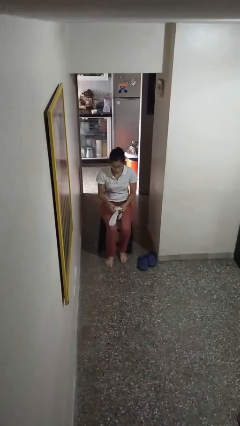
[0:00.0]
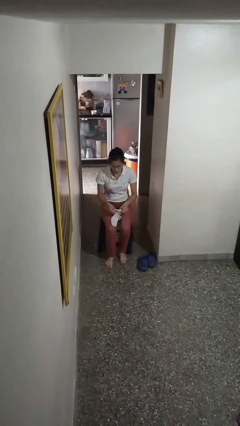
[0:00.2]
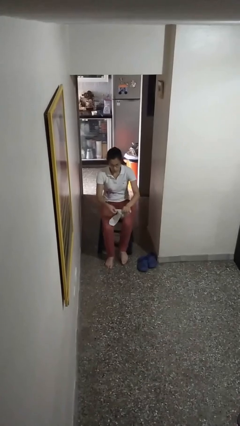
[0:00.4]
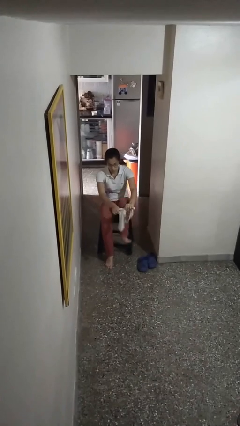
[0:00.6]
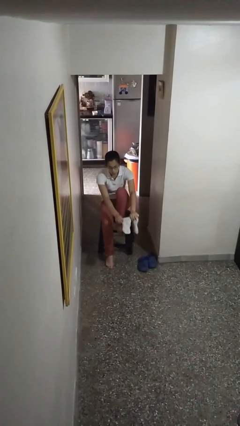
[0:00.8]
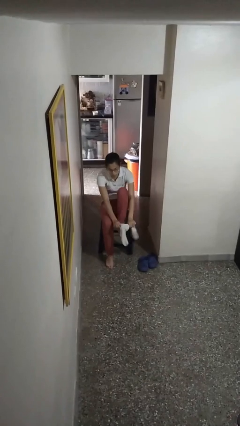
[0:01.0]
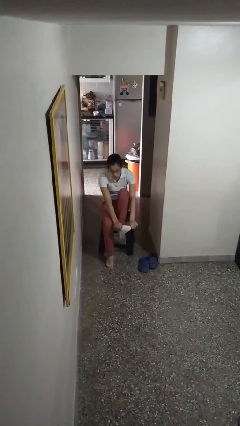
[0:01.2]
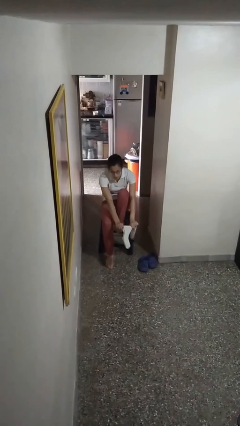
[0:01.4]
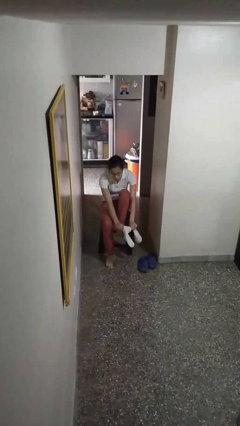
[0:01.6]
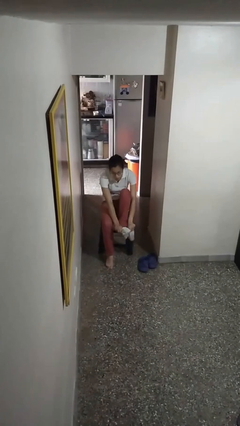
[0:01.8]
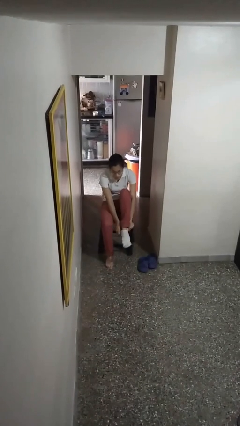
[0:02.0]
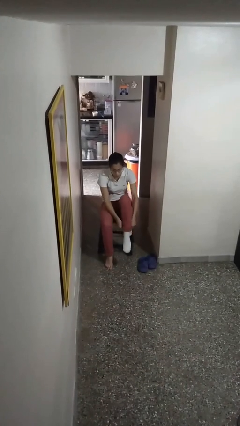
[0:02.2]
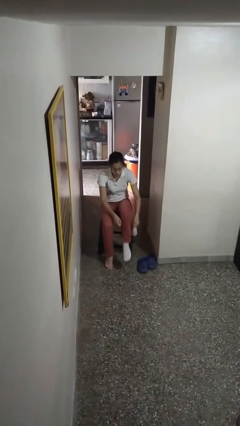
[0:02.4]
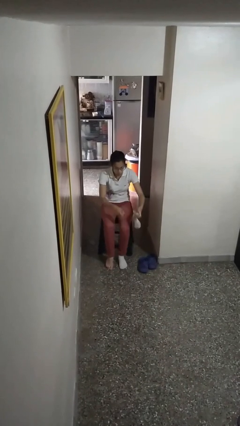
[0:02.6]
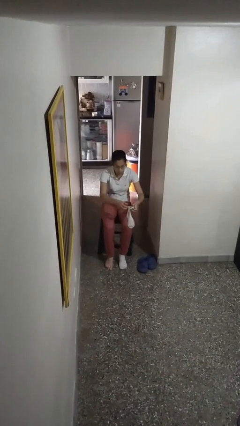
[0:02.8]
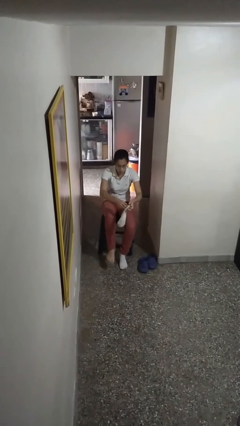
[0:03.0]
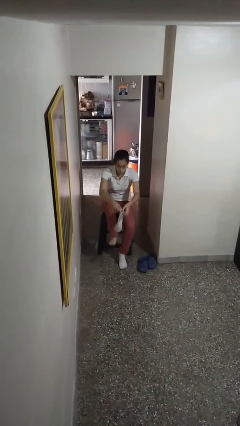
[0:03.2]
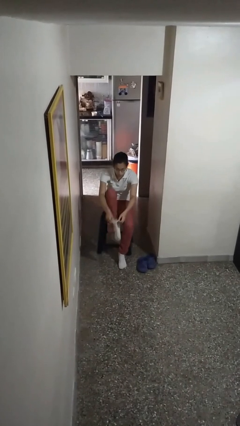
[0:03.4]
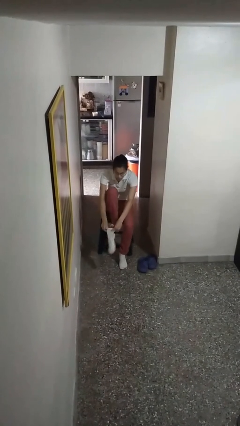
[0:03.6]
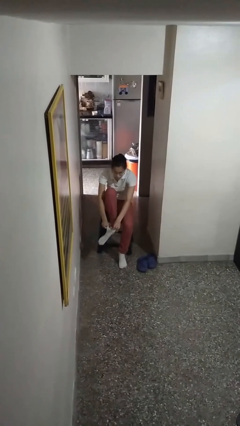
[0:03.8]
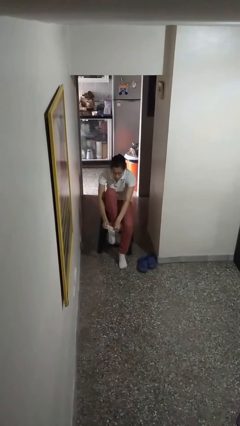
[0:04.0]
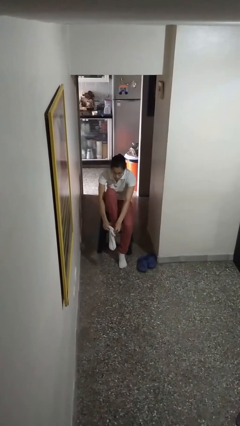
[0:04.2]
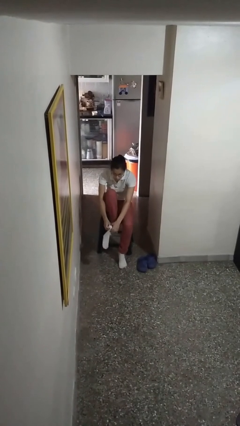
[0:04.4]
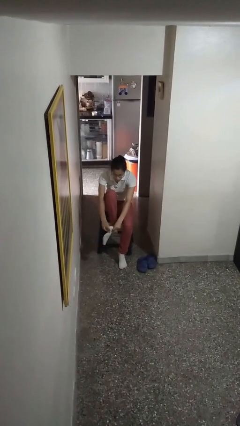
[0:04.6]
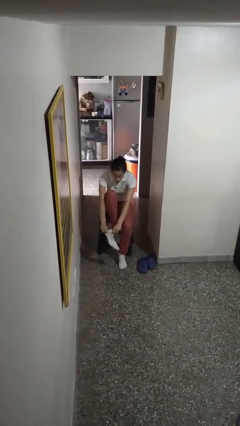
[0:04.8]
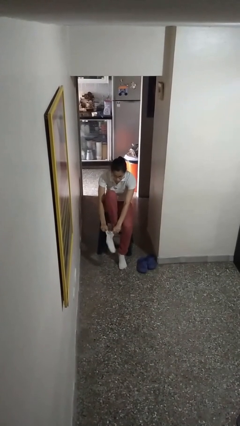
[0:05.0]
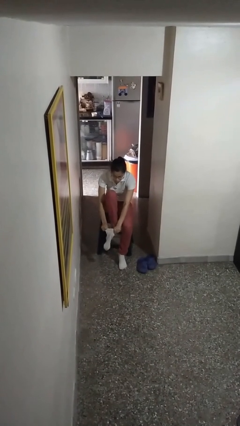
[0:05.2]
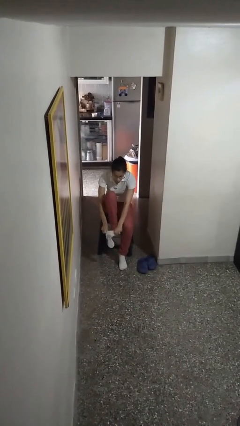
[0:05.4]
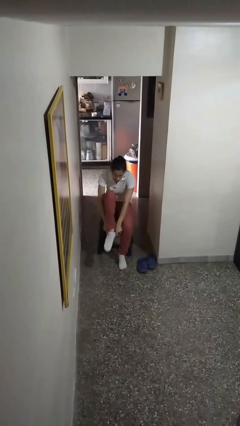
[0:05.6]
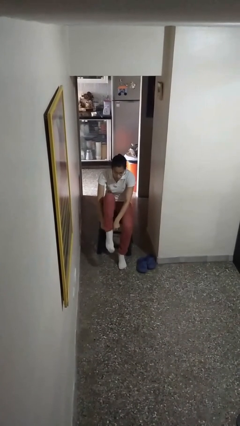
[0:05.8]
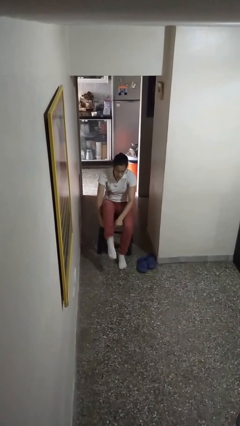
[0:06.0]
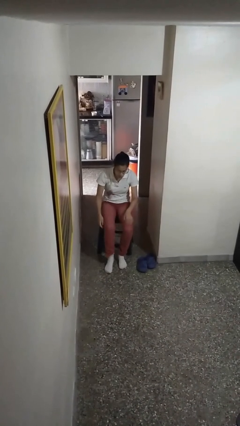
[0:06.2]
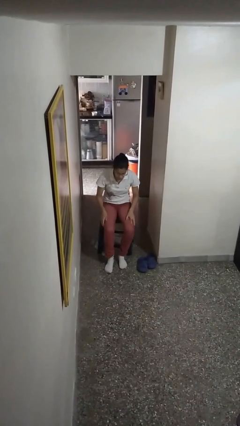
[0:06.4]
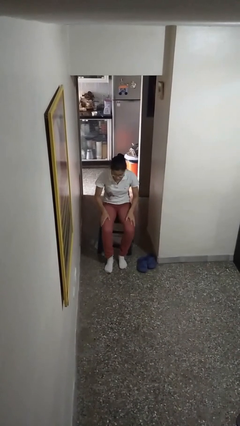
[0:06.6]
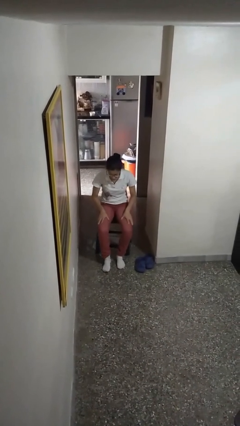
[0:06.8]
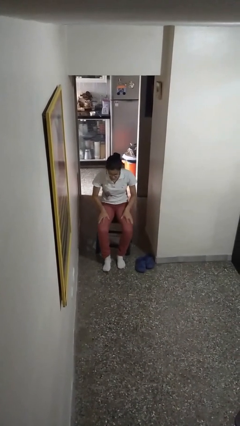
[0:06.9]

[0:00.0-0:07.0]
person puts on socks

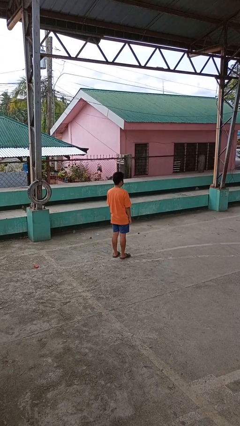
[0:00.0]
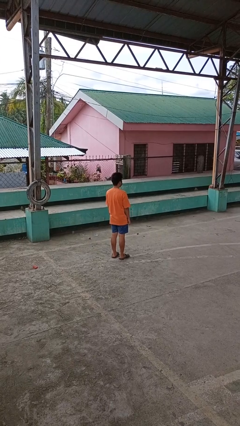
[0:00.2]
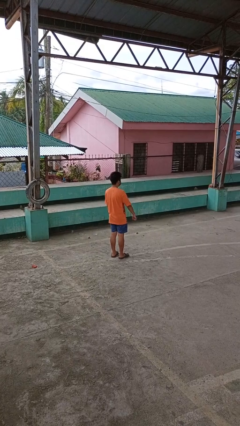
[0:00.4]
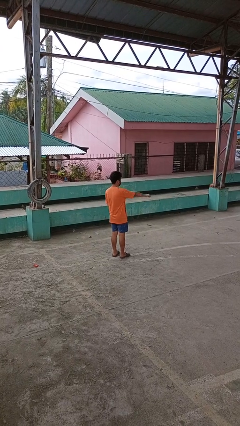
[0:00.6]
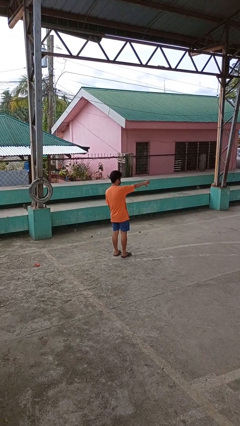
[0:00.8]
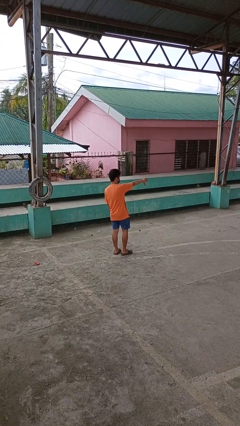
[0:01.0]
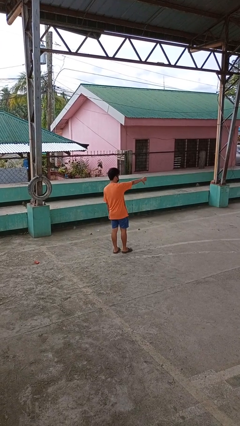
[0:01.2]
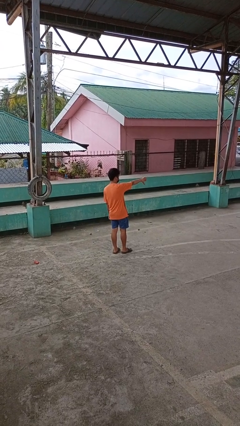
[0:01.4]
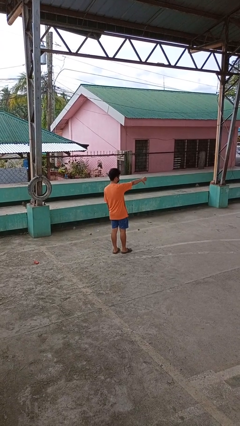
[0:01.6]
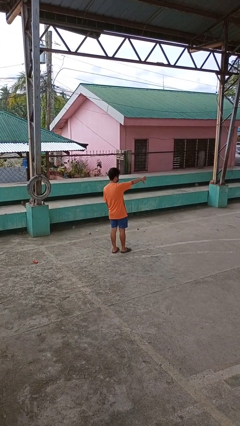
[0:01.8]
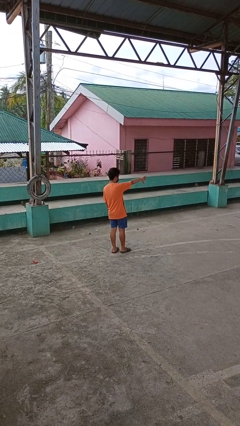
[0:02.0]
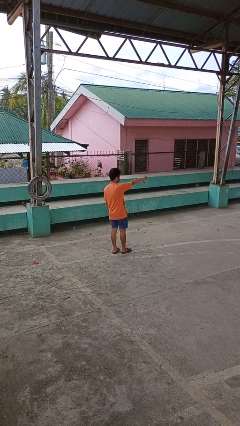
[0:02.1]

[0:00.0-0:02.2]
person gestures thumbs down

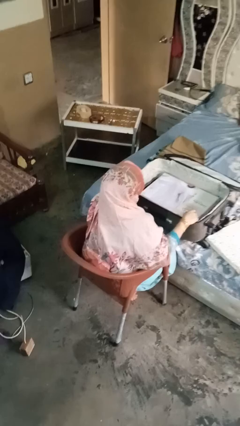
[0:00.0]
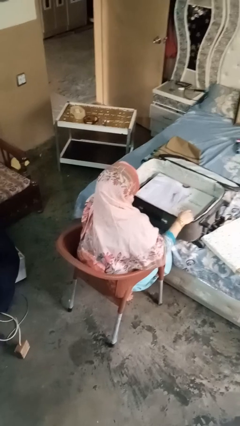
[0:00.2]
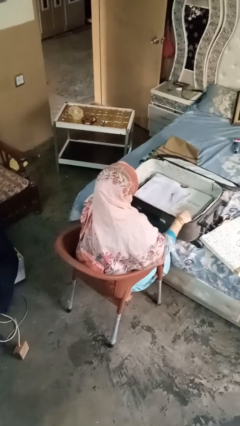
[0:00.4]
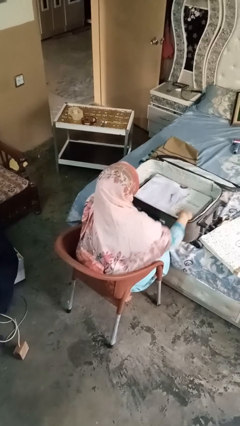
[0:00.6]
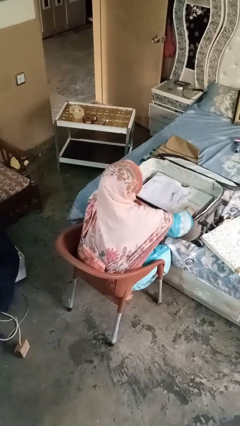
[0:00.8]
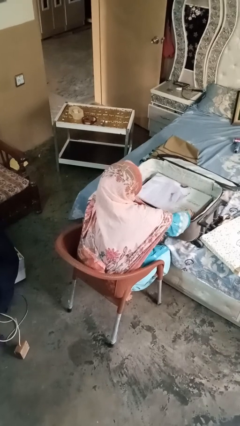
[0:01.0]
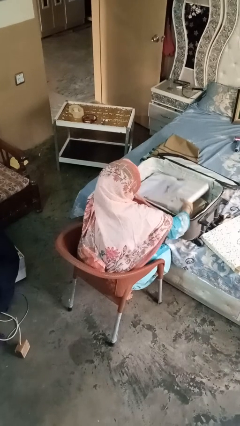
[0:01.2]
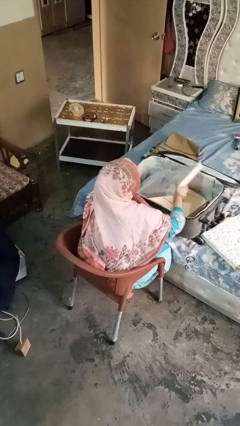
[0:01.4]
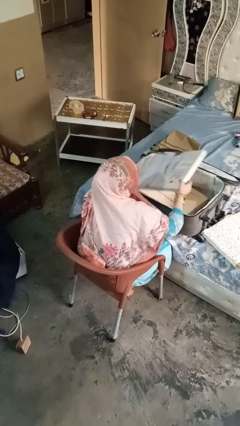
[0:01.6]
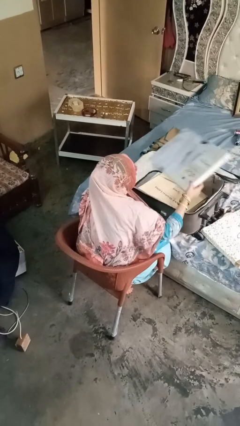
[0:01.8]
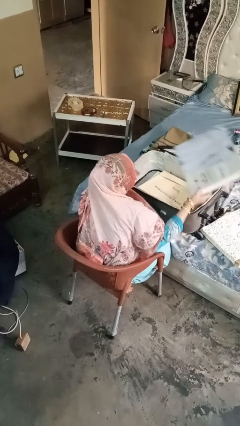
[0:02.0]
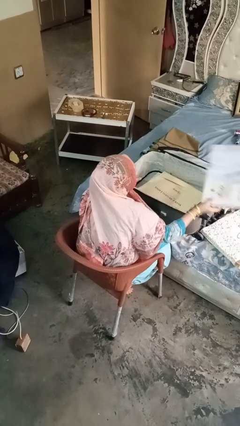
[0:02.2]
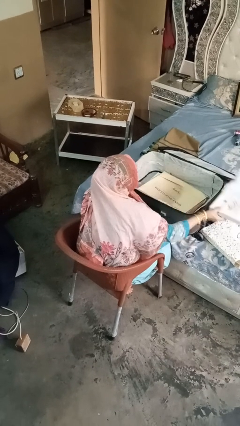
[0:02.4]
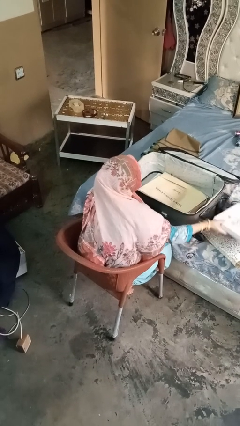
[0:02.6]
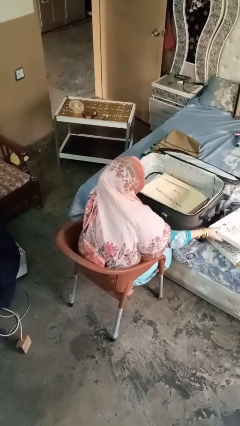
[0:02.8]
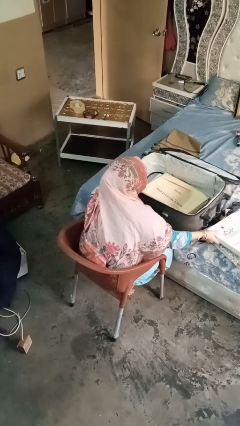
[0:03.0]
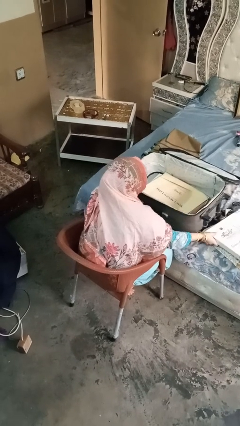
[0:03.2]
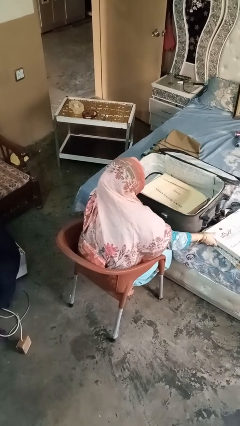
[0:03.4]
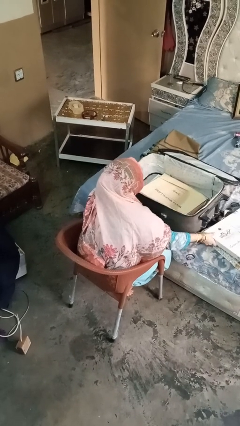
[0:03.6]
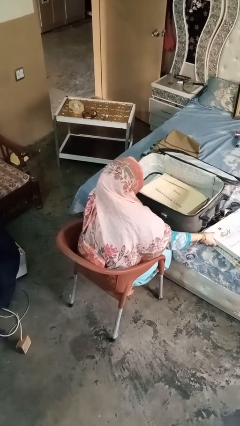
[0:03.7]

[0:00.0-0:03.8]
person unloads clothes from suitcase

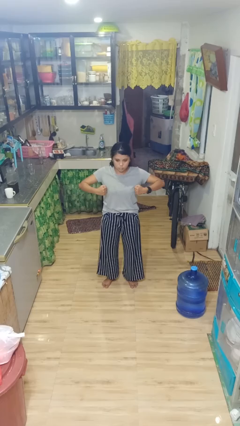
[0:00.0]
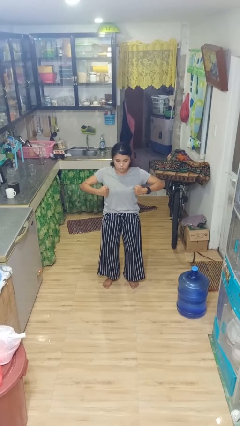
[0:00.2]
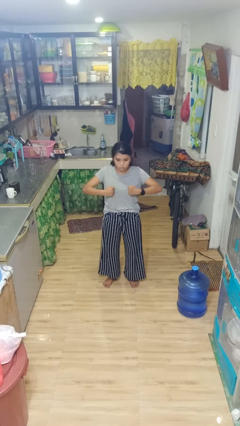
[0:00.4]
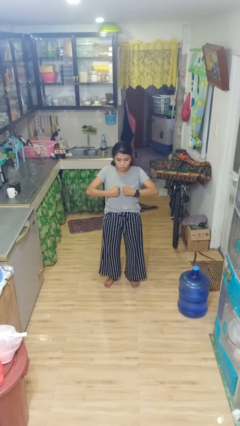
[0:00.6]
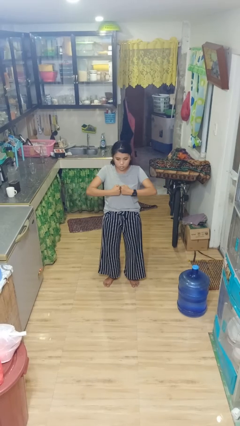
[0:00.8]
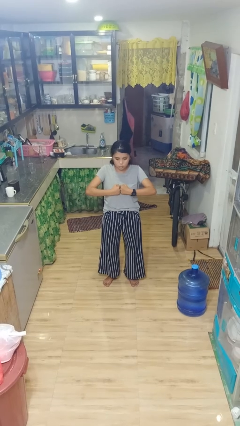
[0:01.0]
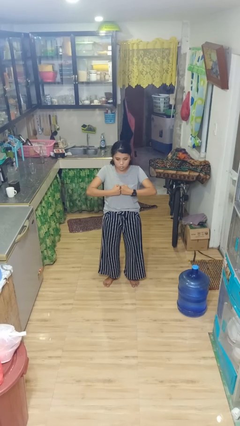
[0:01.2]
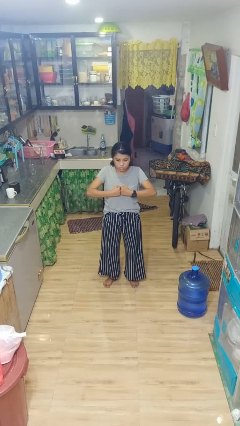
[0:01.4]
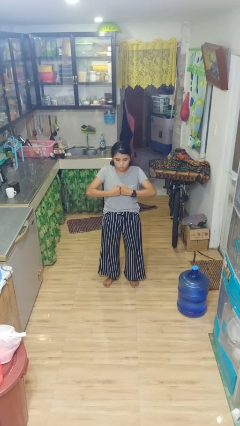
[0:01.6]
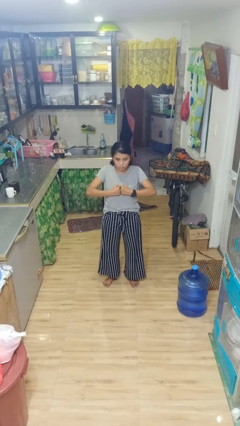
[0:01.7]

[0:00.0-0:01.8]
person gestures zoom out

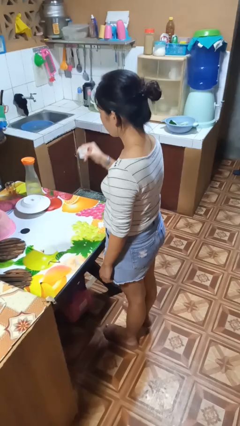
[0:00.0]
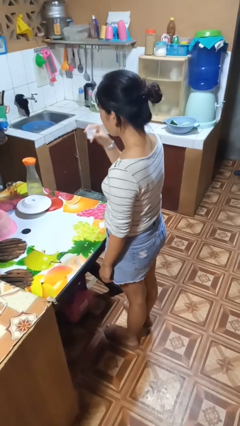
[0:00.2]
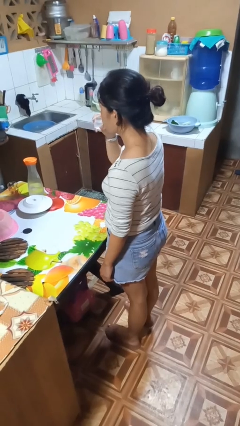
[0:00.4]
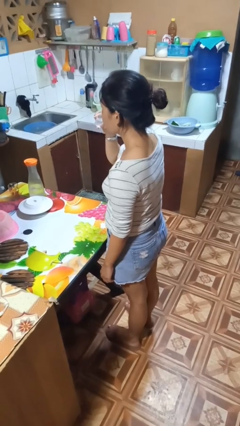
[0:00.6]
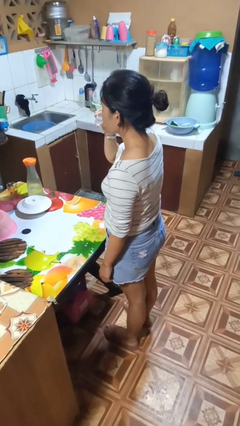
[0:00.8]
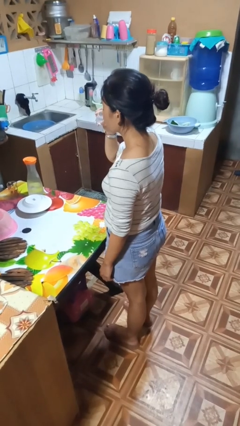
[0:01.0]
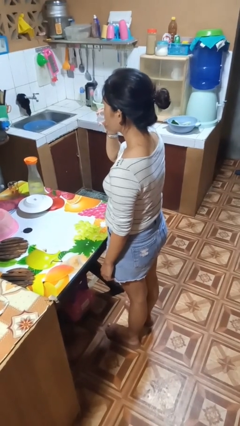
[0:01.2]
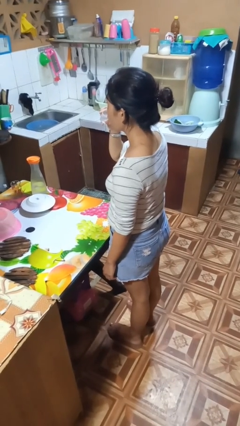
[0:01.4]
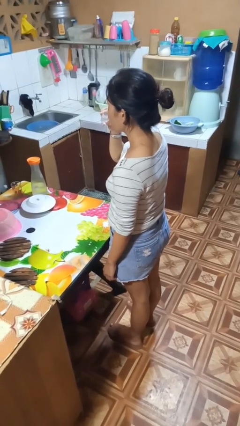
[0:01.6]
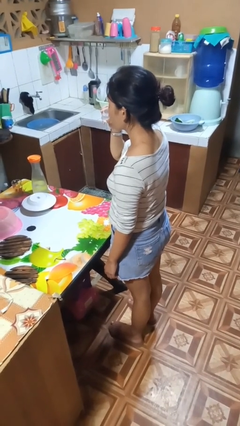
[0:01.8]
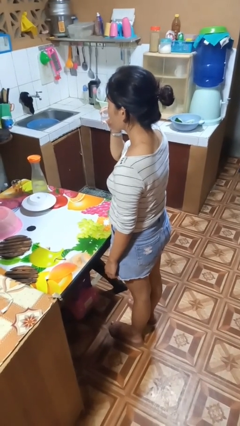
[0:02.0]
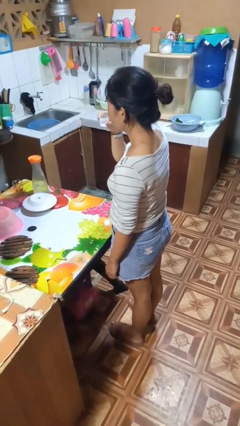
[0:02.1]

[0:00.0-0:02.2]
person drinks from shotglass

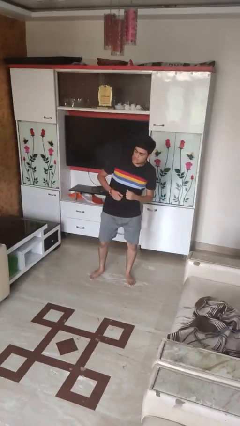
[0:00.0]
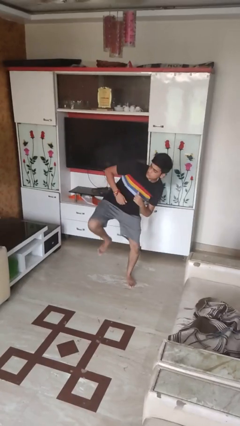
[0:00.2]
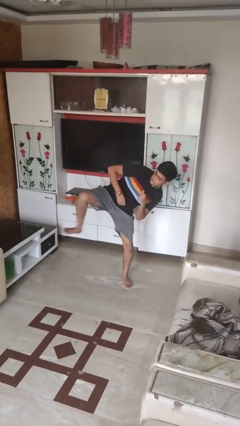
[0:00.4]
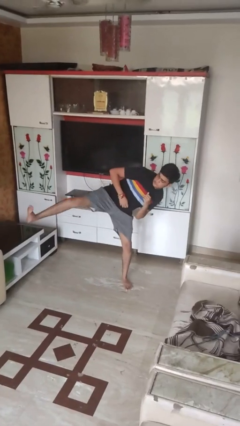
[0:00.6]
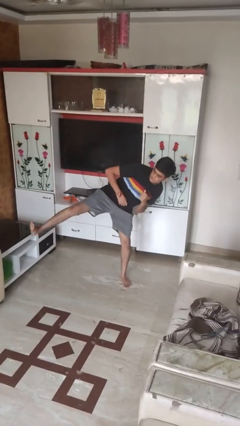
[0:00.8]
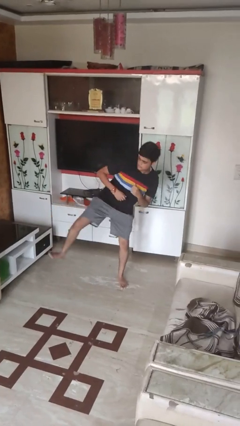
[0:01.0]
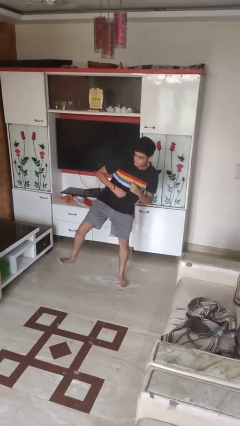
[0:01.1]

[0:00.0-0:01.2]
person karate kicks
